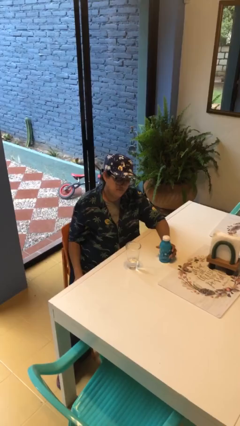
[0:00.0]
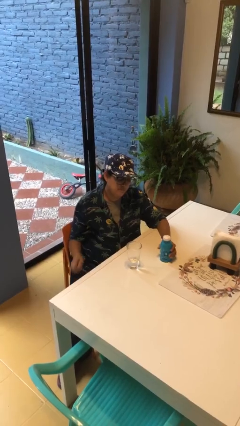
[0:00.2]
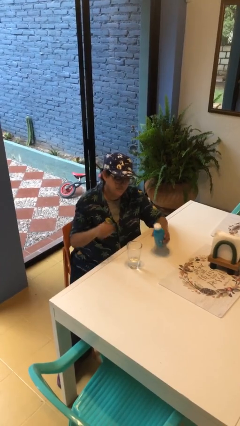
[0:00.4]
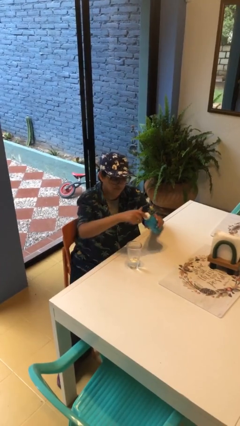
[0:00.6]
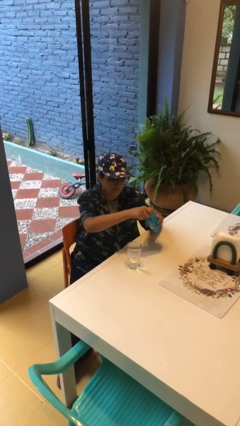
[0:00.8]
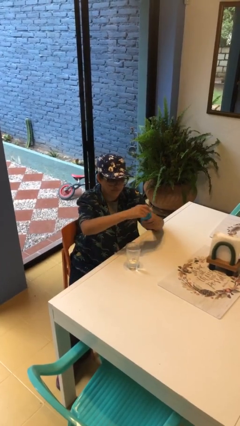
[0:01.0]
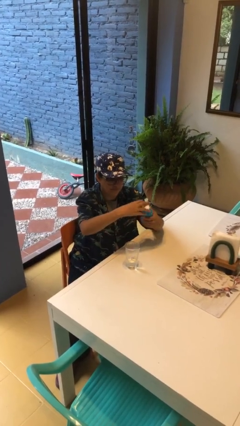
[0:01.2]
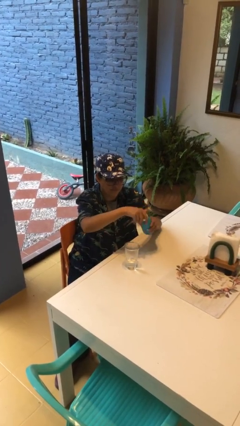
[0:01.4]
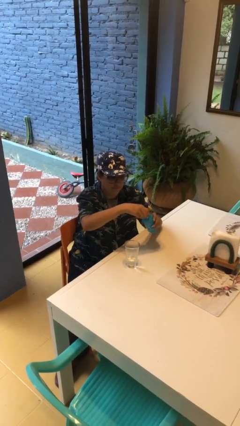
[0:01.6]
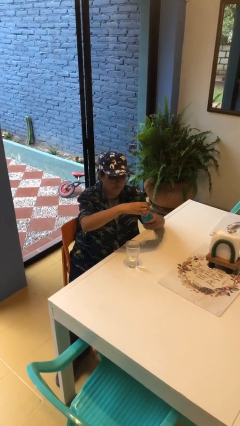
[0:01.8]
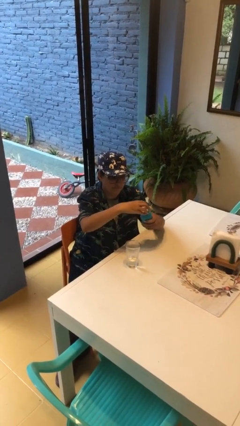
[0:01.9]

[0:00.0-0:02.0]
person unscrews lid from bottle

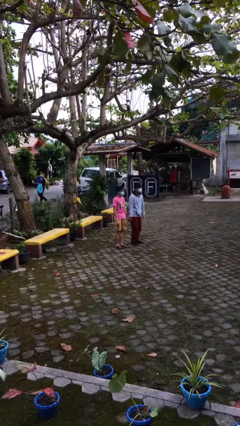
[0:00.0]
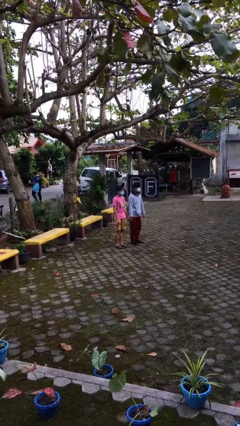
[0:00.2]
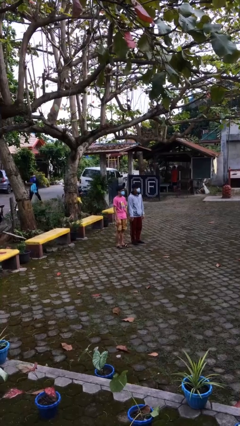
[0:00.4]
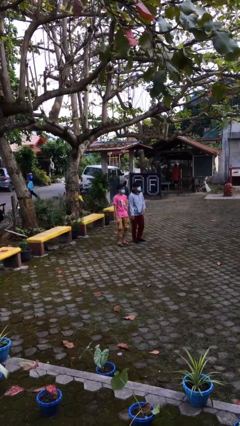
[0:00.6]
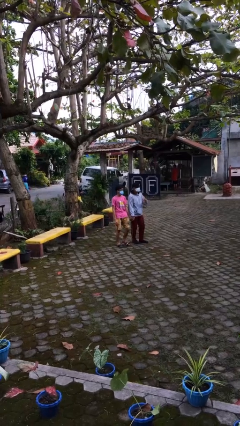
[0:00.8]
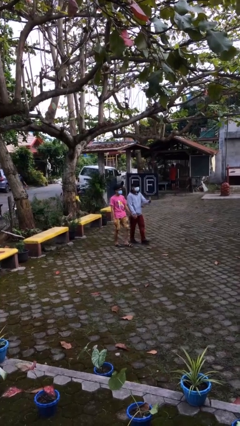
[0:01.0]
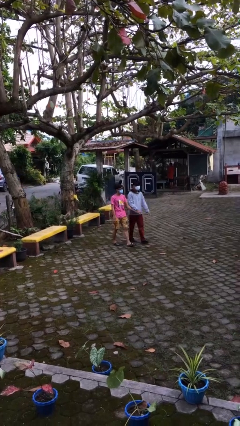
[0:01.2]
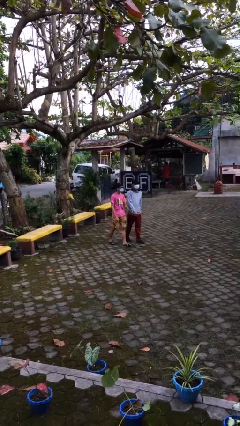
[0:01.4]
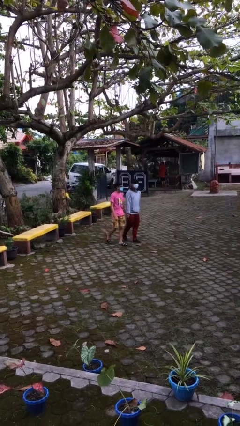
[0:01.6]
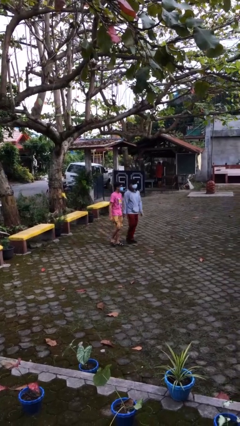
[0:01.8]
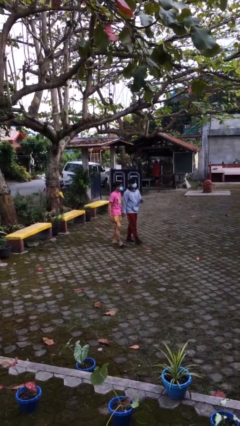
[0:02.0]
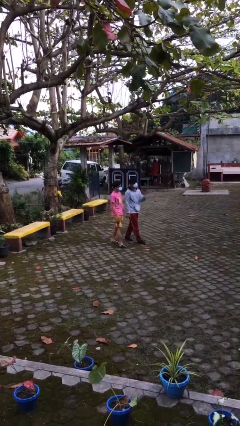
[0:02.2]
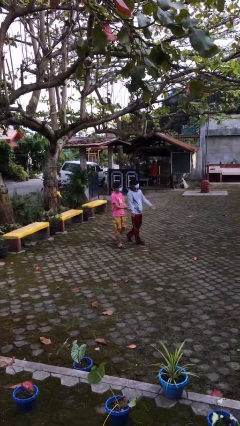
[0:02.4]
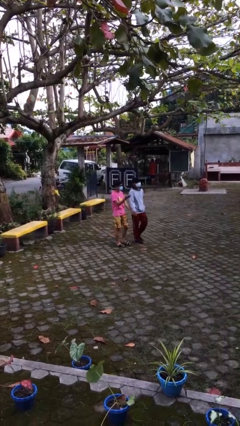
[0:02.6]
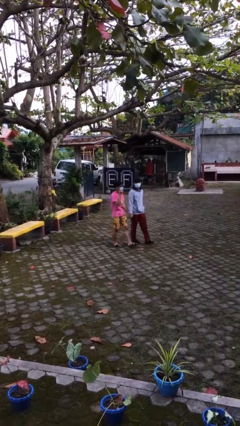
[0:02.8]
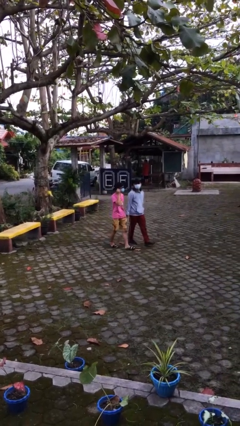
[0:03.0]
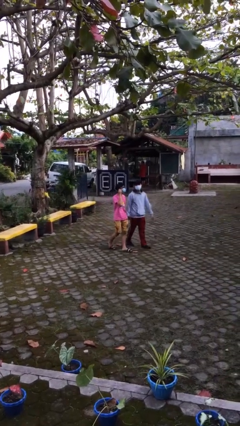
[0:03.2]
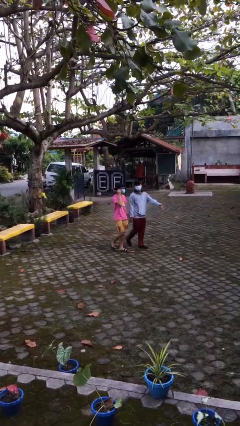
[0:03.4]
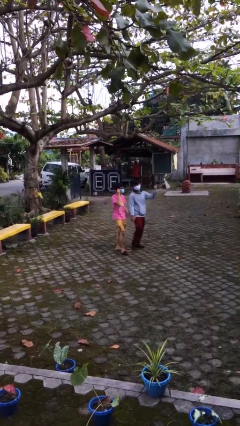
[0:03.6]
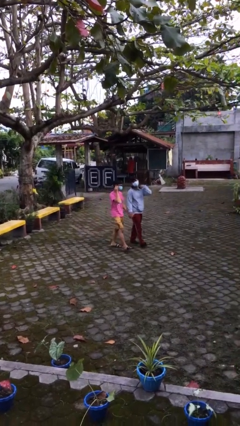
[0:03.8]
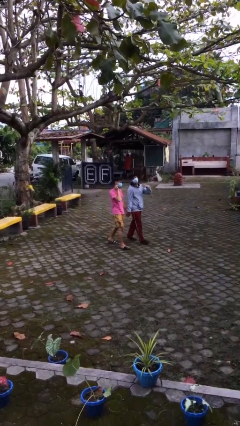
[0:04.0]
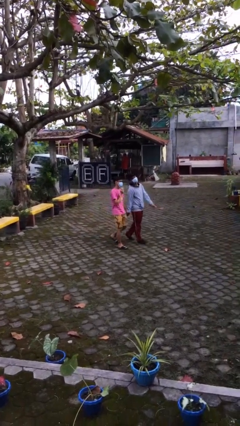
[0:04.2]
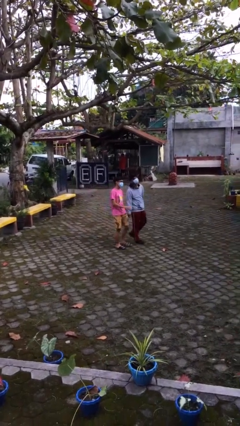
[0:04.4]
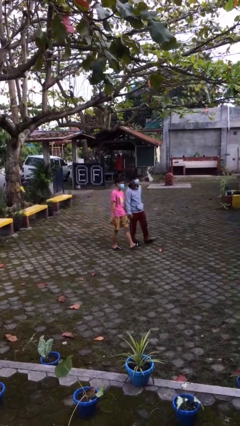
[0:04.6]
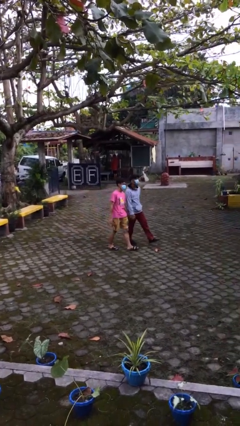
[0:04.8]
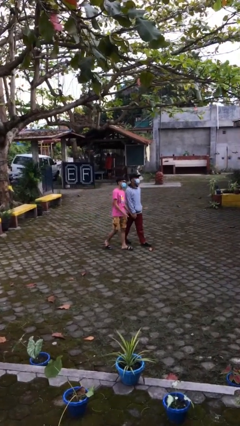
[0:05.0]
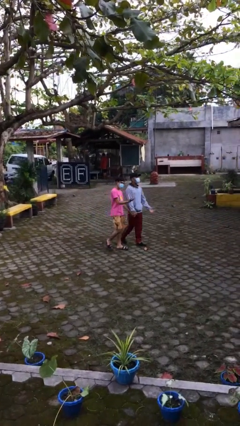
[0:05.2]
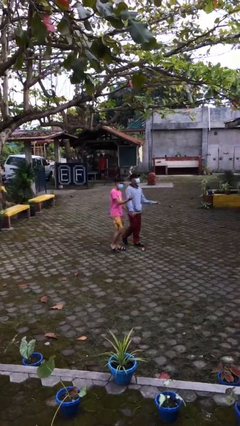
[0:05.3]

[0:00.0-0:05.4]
person holds hand

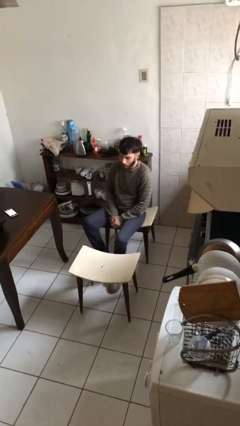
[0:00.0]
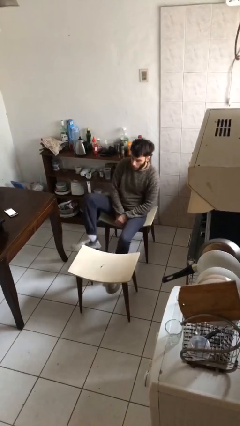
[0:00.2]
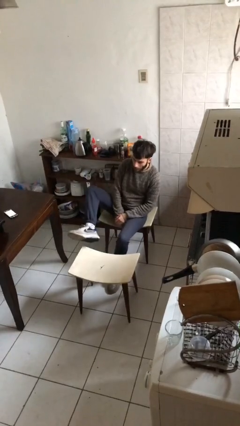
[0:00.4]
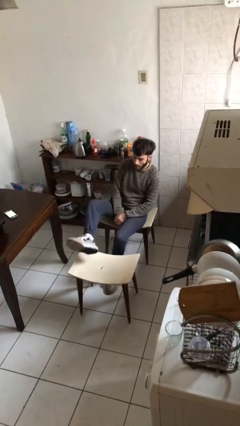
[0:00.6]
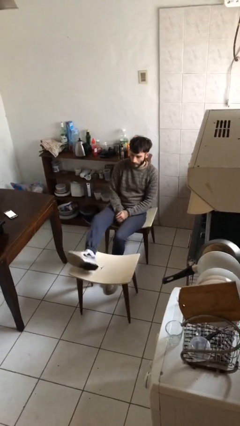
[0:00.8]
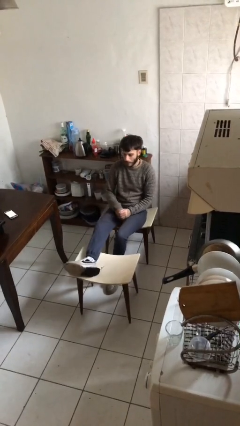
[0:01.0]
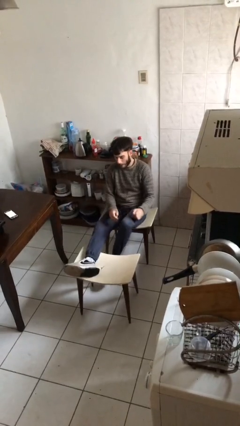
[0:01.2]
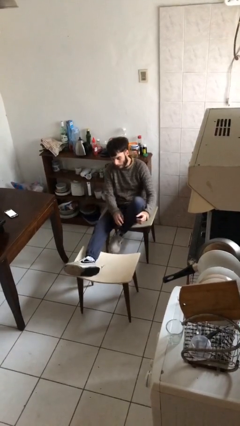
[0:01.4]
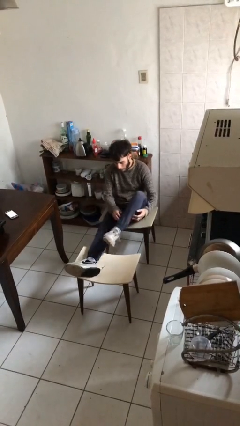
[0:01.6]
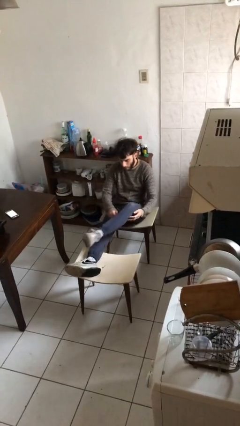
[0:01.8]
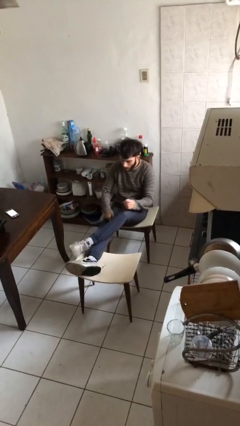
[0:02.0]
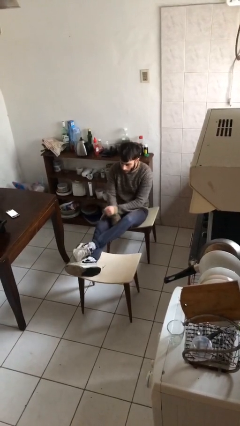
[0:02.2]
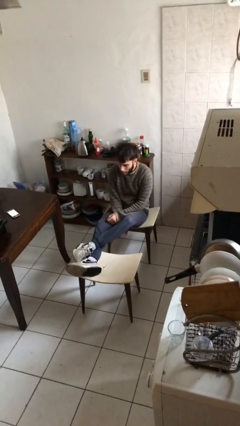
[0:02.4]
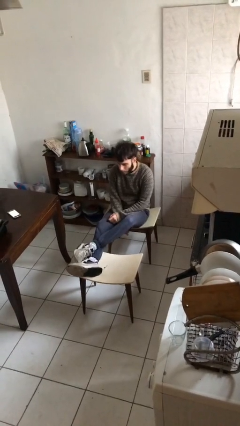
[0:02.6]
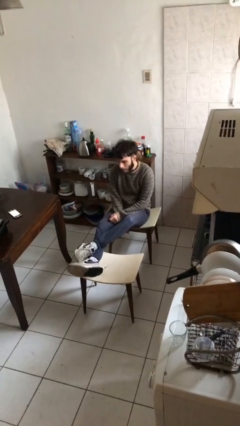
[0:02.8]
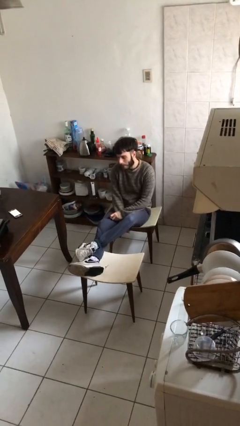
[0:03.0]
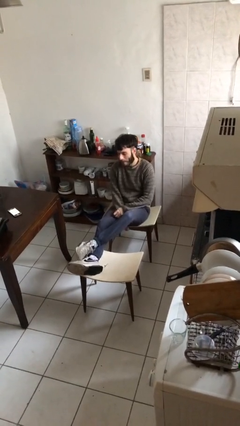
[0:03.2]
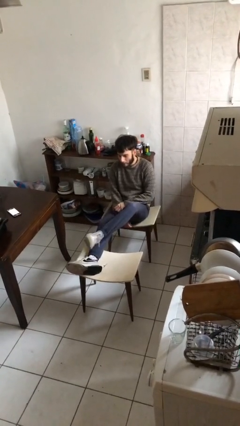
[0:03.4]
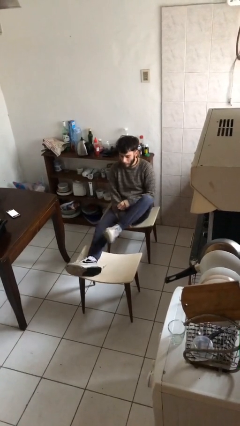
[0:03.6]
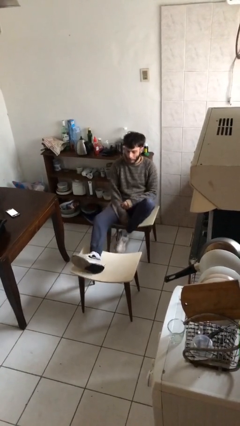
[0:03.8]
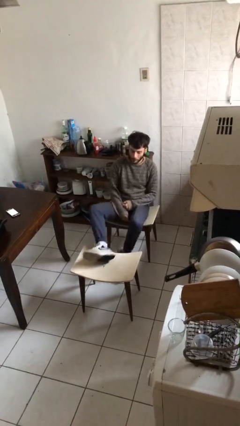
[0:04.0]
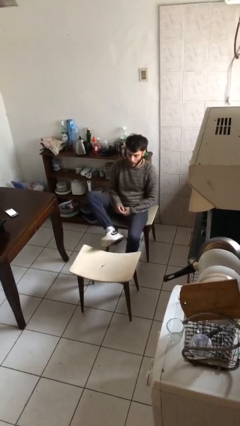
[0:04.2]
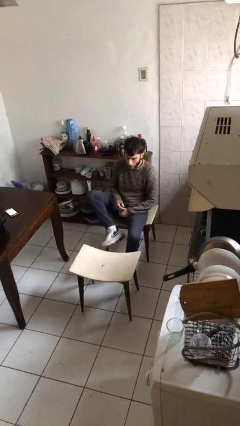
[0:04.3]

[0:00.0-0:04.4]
person puts feet up

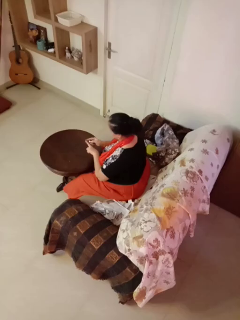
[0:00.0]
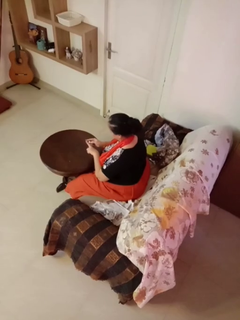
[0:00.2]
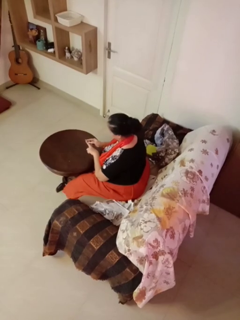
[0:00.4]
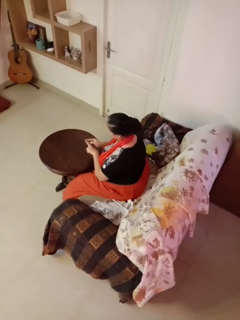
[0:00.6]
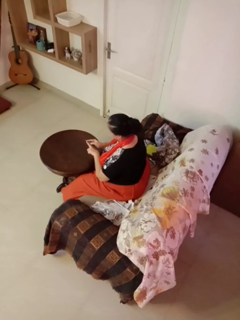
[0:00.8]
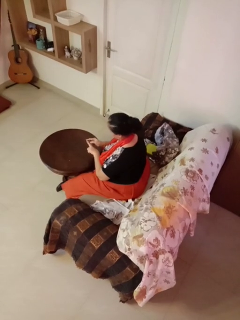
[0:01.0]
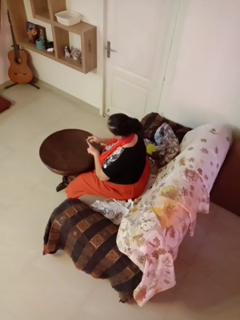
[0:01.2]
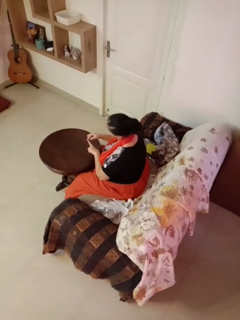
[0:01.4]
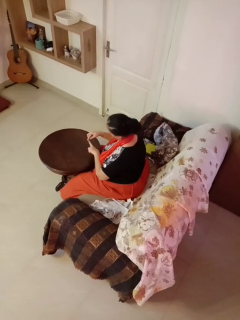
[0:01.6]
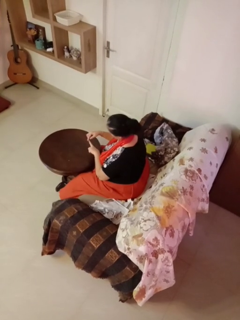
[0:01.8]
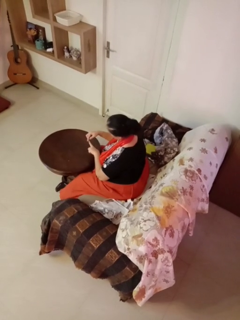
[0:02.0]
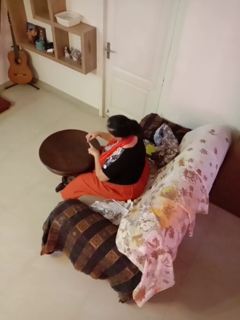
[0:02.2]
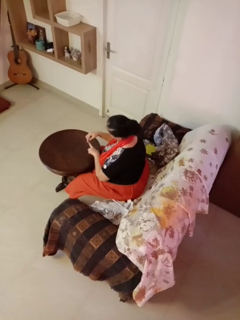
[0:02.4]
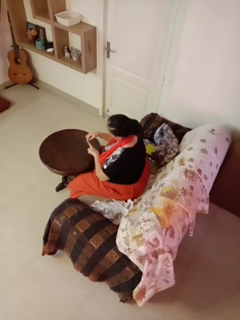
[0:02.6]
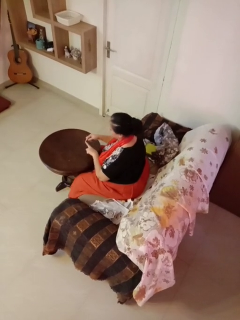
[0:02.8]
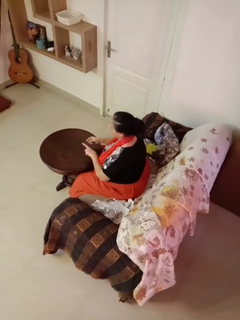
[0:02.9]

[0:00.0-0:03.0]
person files fingernails

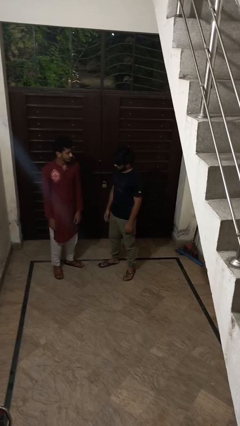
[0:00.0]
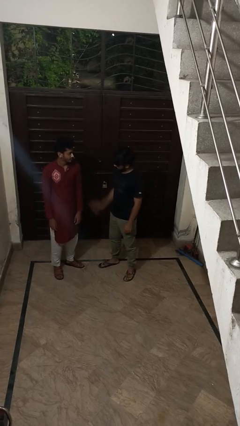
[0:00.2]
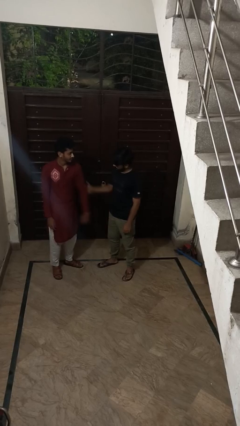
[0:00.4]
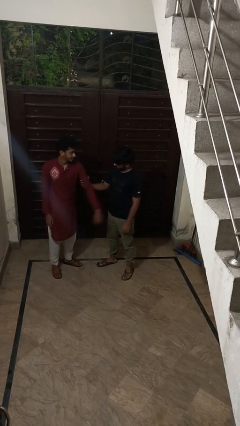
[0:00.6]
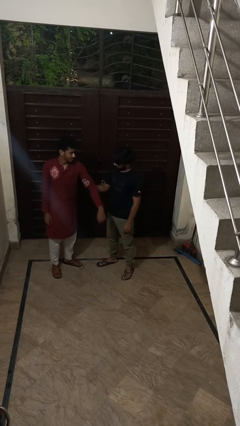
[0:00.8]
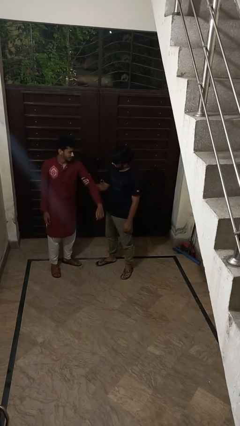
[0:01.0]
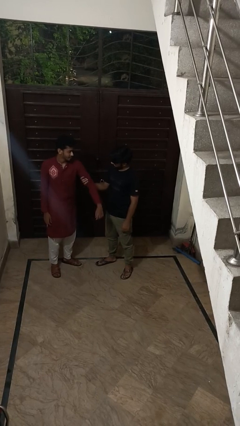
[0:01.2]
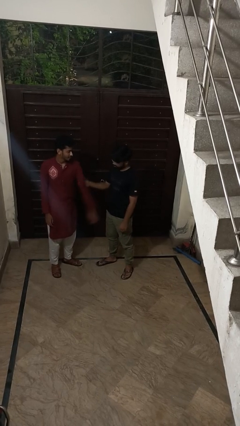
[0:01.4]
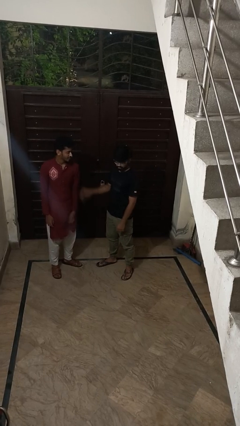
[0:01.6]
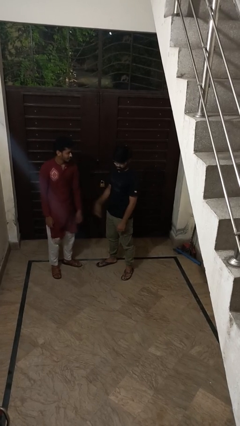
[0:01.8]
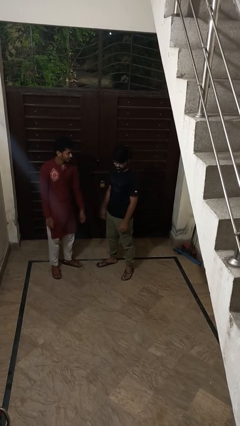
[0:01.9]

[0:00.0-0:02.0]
person grabs person by bicep

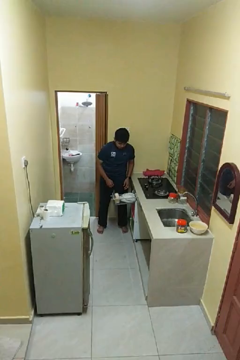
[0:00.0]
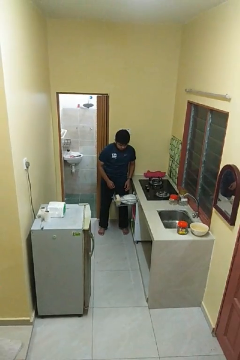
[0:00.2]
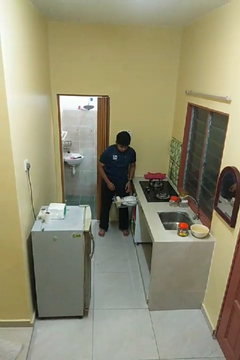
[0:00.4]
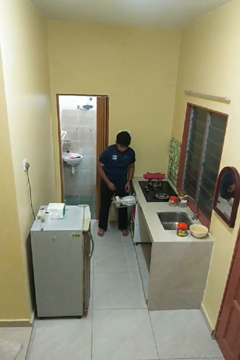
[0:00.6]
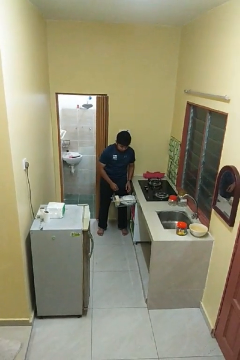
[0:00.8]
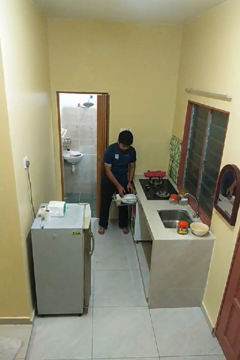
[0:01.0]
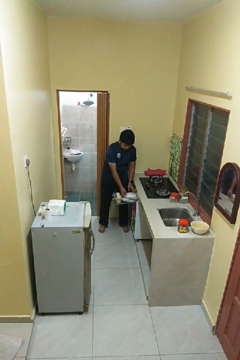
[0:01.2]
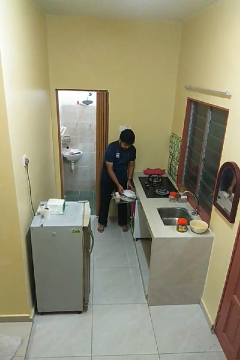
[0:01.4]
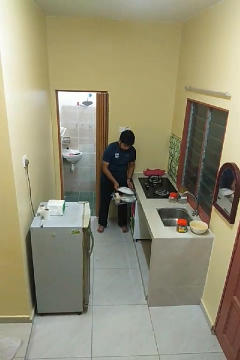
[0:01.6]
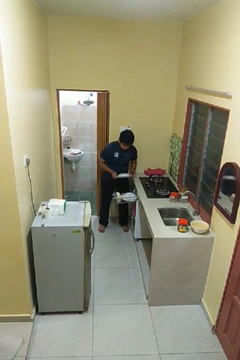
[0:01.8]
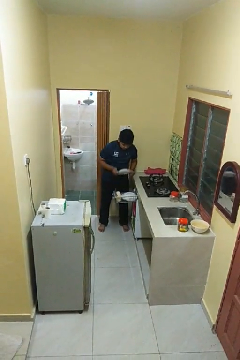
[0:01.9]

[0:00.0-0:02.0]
person takes object from kitchen drawer
